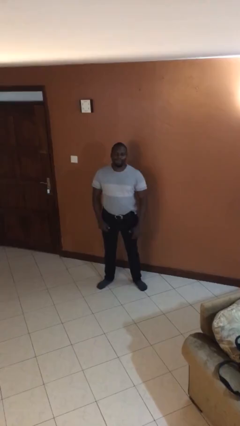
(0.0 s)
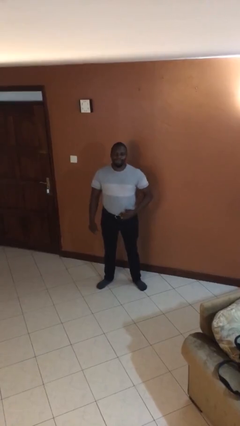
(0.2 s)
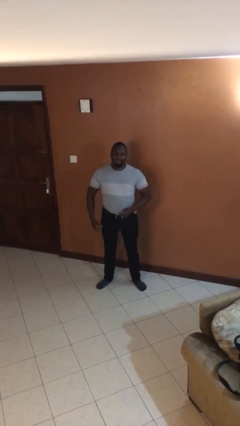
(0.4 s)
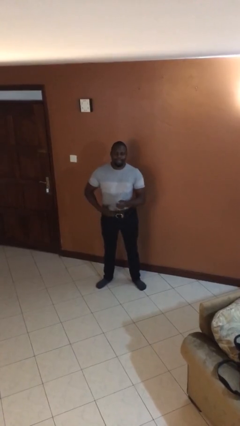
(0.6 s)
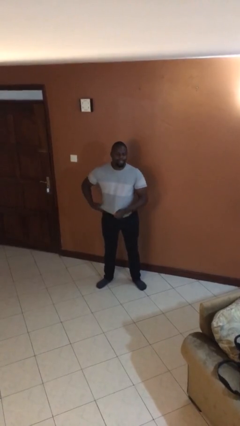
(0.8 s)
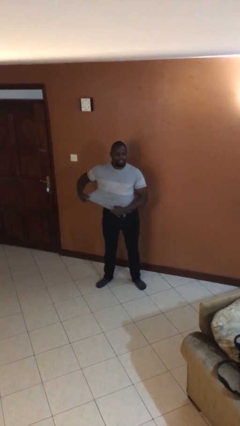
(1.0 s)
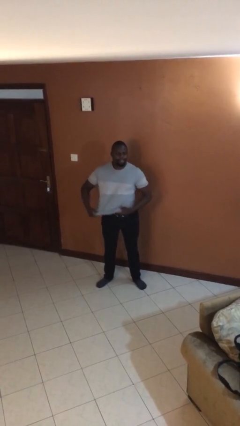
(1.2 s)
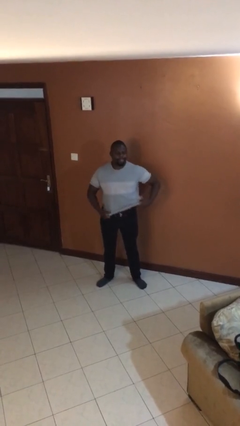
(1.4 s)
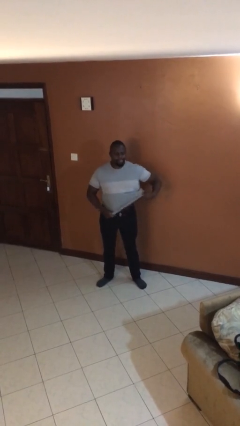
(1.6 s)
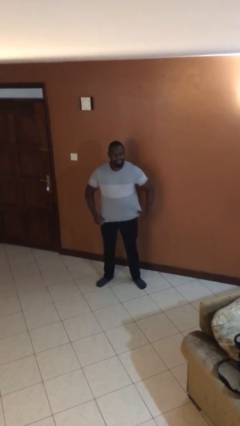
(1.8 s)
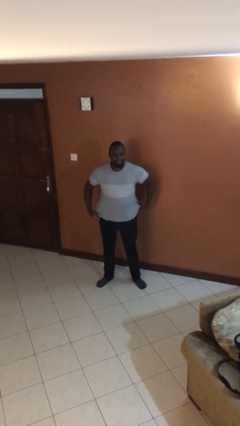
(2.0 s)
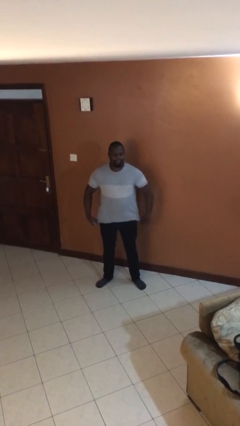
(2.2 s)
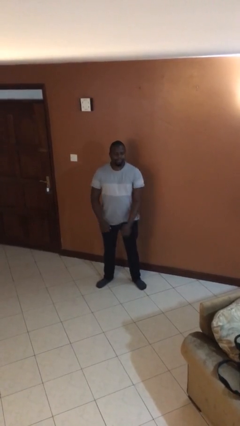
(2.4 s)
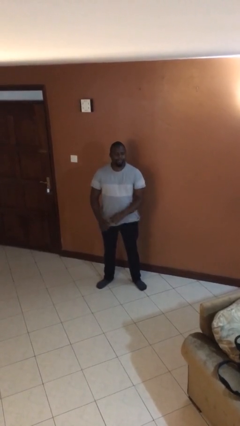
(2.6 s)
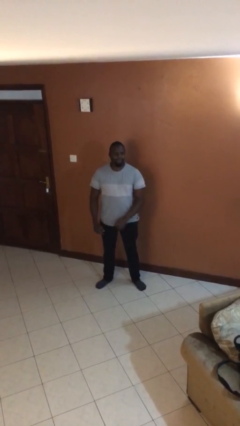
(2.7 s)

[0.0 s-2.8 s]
person untucks shirt

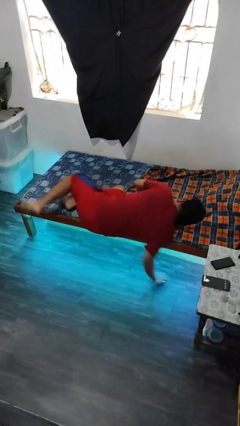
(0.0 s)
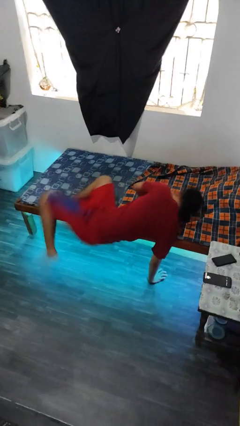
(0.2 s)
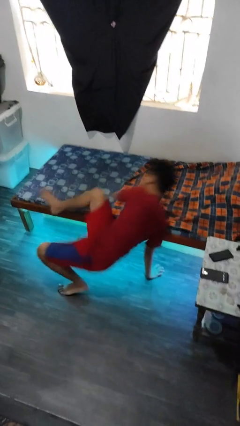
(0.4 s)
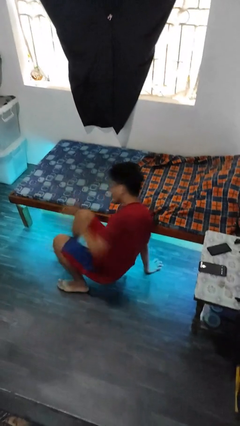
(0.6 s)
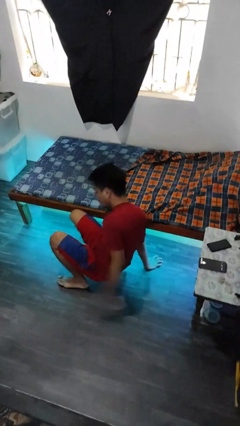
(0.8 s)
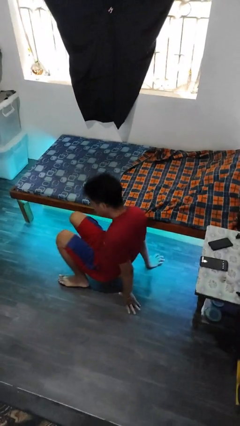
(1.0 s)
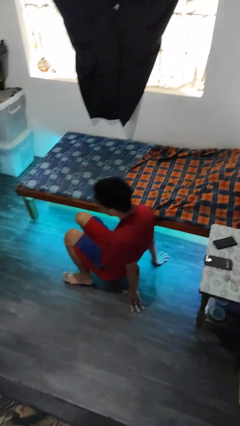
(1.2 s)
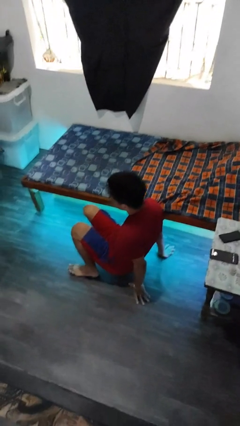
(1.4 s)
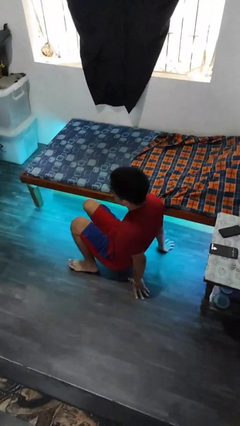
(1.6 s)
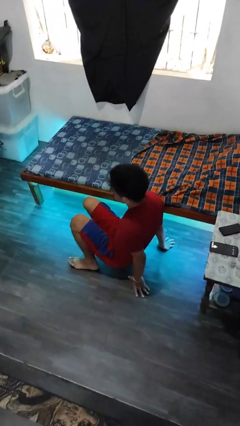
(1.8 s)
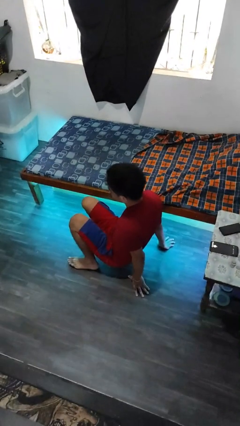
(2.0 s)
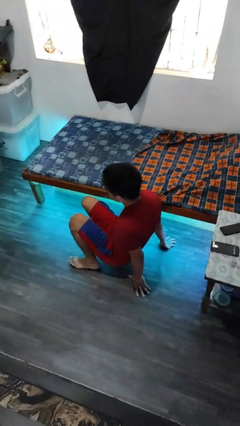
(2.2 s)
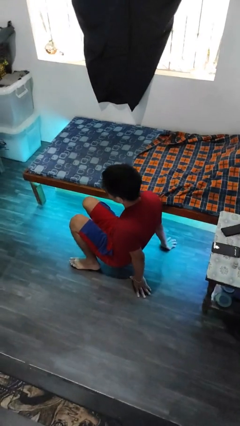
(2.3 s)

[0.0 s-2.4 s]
person falls from bed

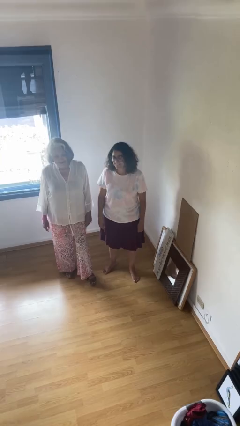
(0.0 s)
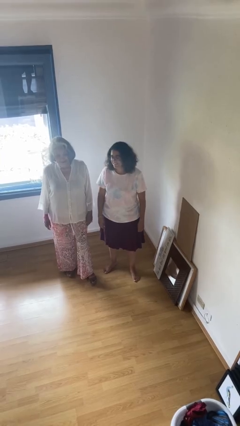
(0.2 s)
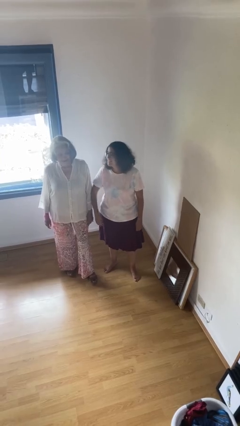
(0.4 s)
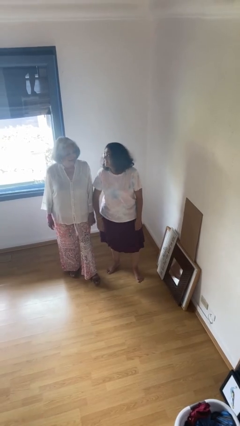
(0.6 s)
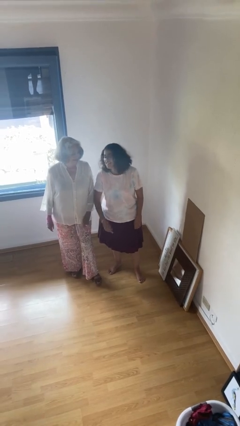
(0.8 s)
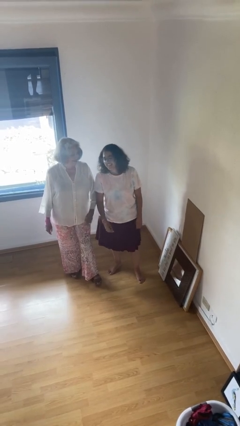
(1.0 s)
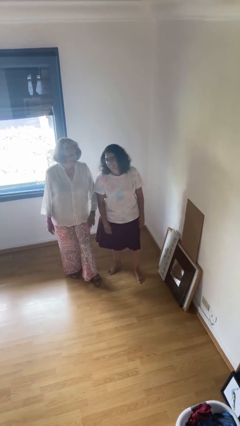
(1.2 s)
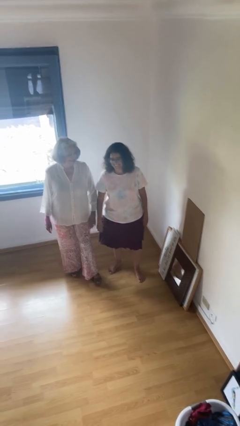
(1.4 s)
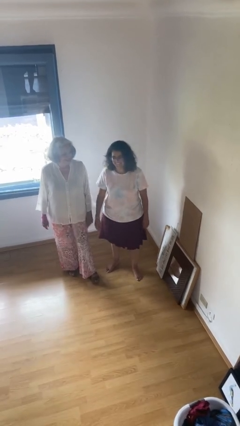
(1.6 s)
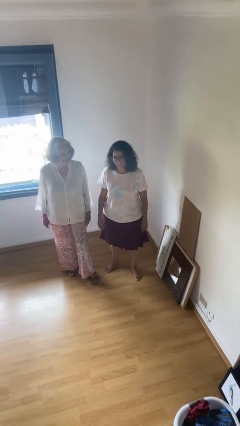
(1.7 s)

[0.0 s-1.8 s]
person nudges person with elbow

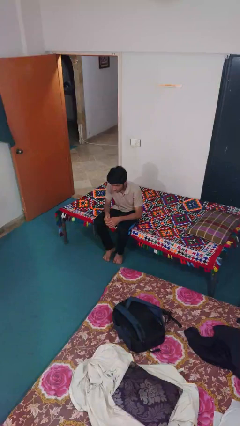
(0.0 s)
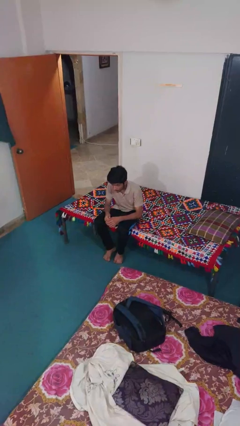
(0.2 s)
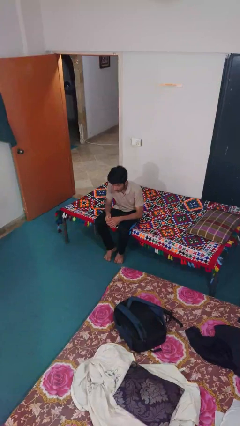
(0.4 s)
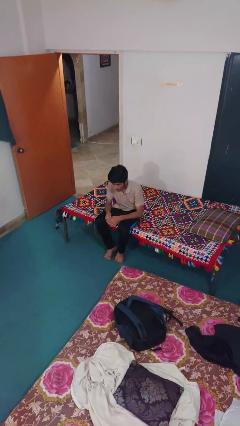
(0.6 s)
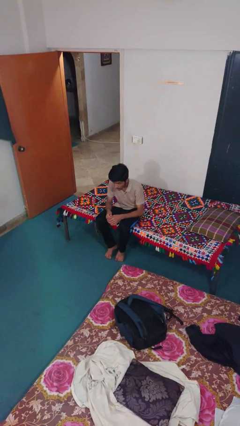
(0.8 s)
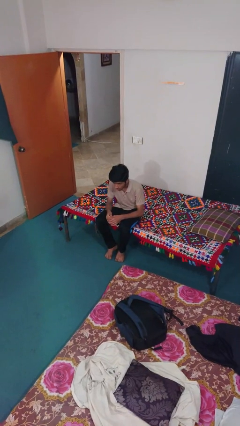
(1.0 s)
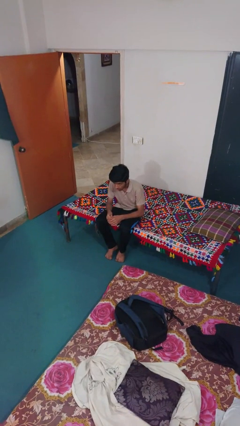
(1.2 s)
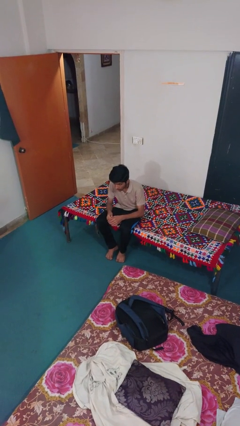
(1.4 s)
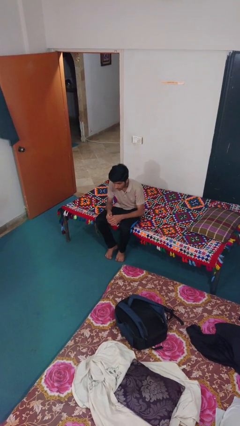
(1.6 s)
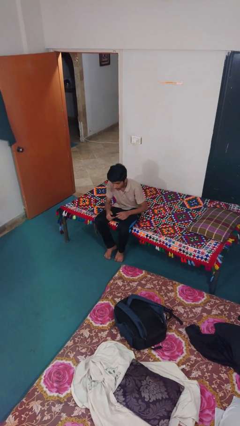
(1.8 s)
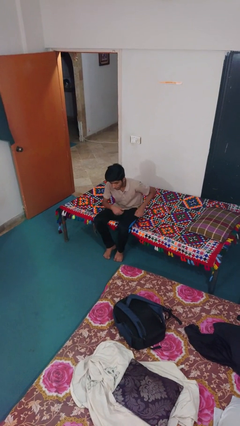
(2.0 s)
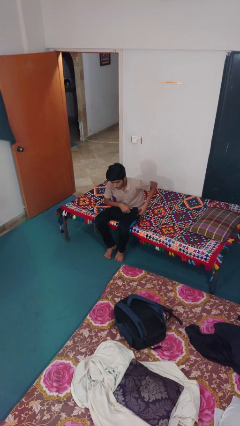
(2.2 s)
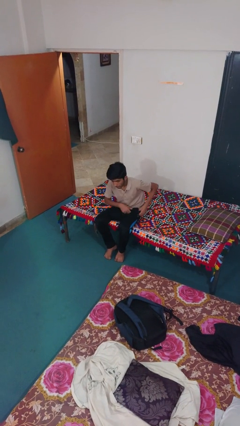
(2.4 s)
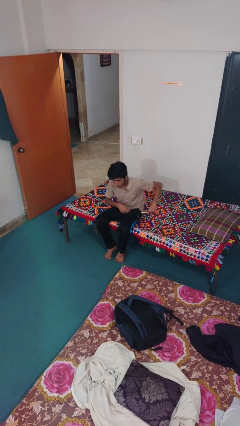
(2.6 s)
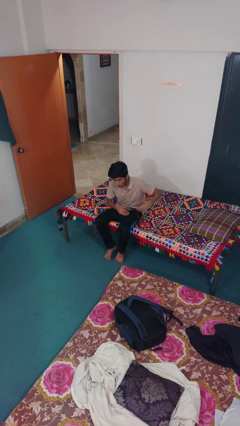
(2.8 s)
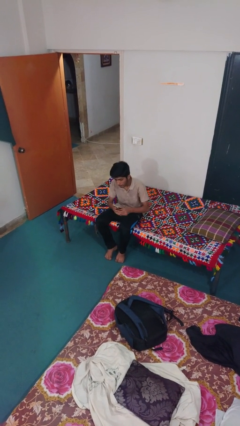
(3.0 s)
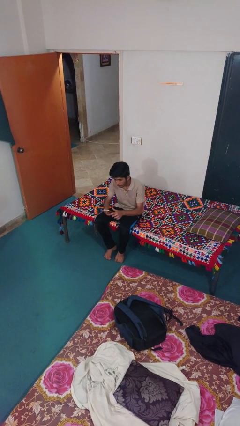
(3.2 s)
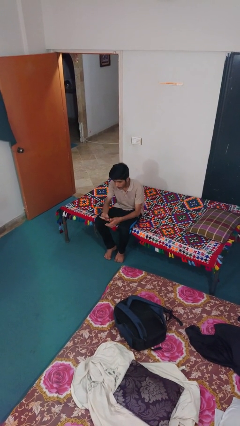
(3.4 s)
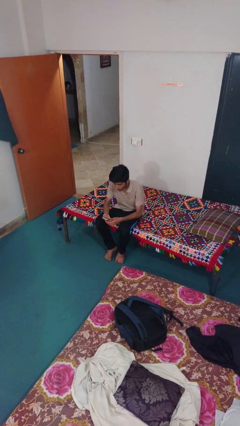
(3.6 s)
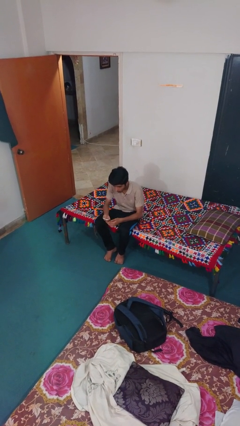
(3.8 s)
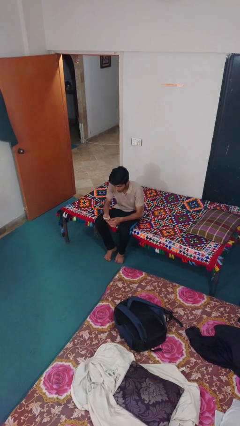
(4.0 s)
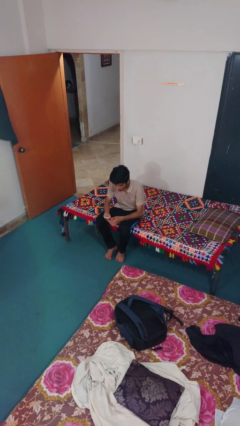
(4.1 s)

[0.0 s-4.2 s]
person takes phone from pocket

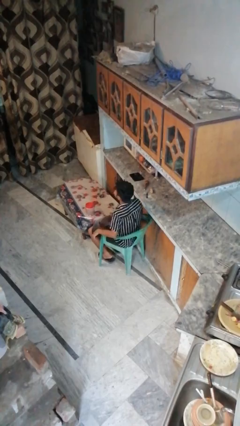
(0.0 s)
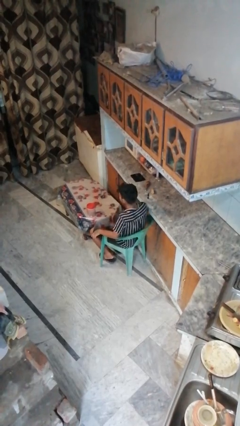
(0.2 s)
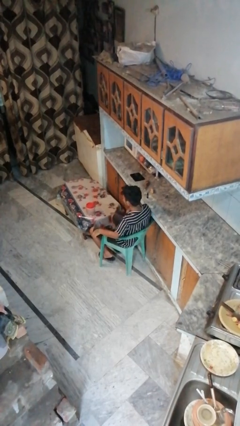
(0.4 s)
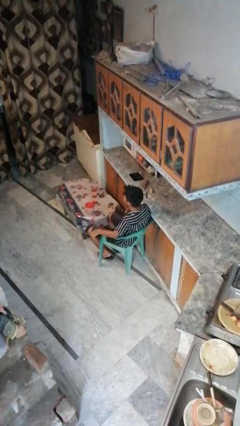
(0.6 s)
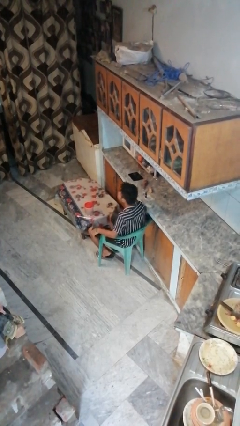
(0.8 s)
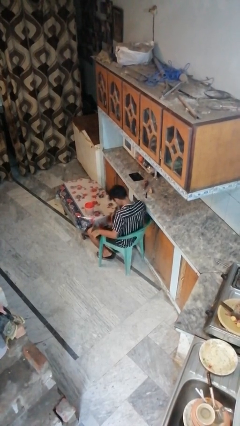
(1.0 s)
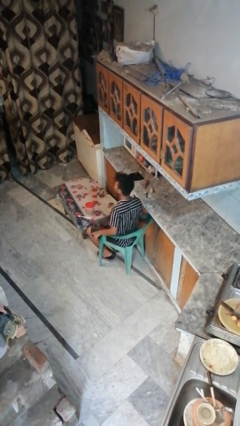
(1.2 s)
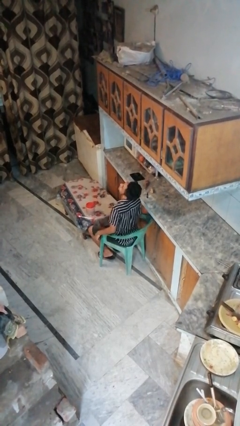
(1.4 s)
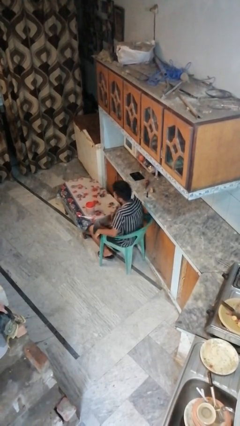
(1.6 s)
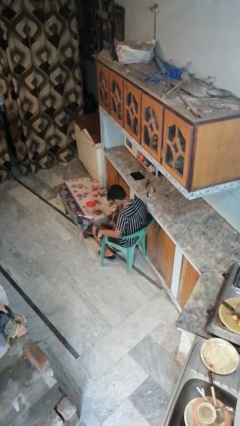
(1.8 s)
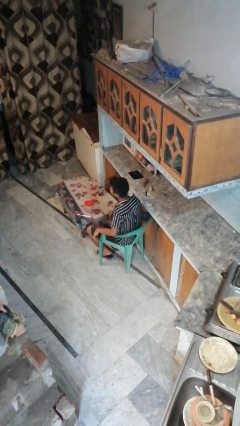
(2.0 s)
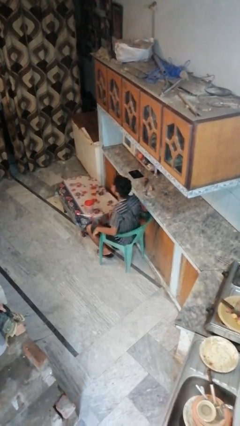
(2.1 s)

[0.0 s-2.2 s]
person nods head

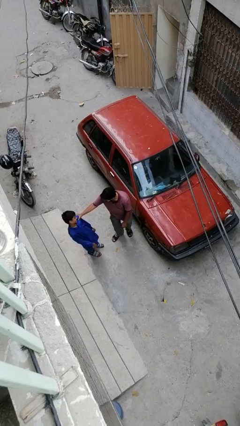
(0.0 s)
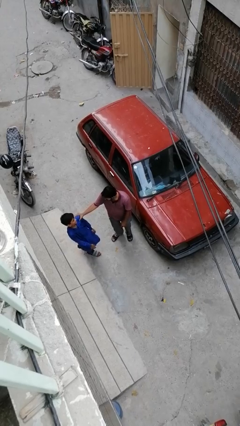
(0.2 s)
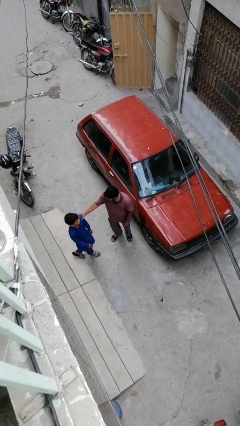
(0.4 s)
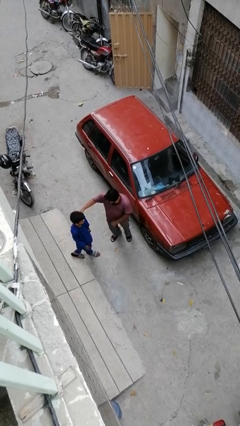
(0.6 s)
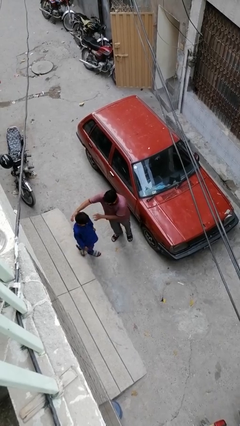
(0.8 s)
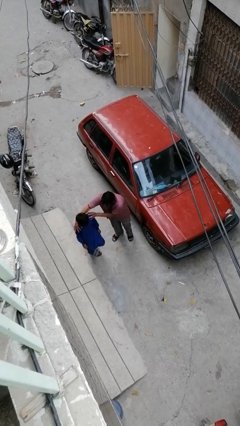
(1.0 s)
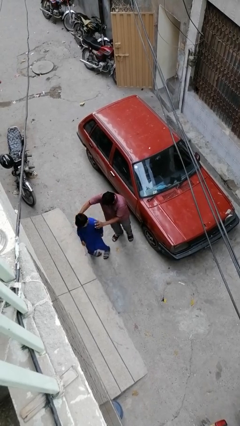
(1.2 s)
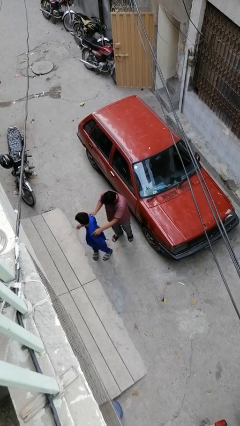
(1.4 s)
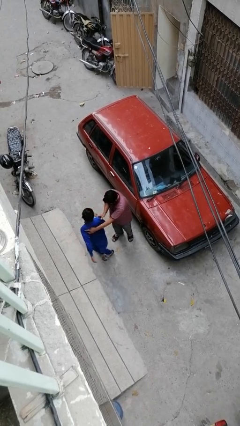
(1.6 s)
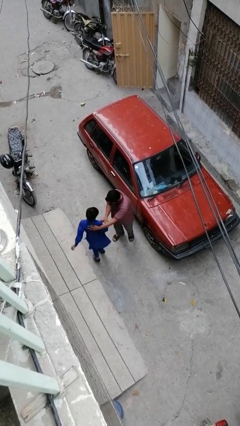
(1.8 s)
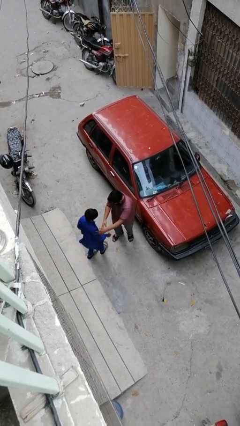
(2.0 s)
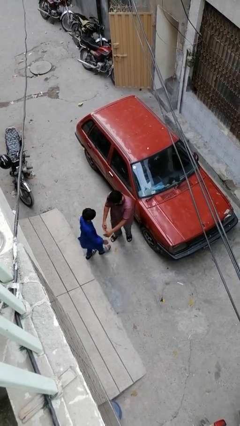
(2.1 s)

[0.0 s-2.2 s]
person spins person around

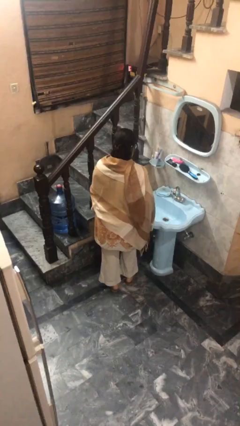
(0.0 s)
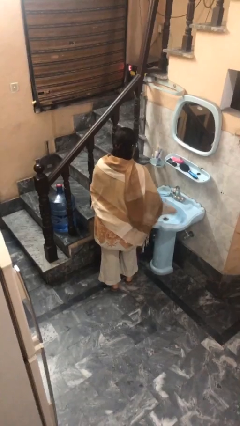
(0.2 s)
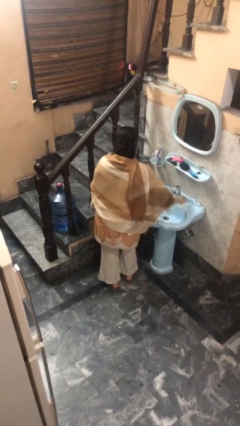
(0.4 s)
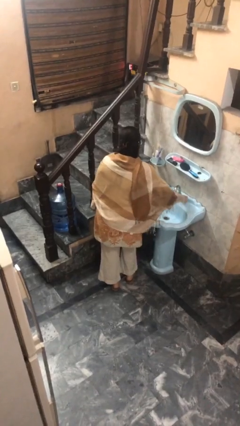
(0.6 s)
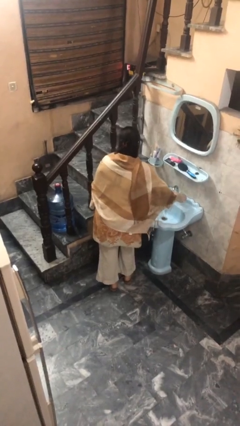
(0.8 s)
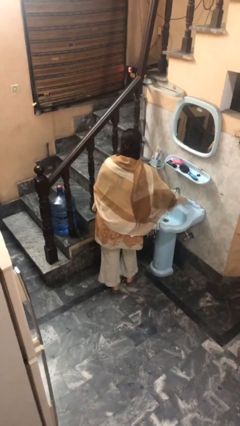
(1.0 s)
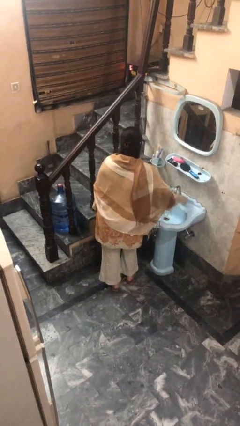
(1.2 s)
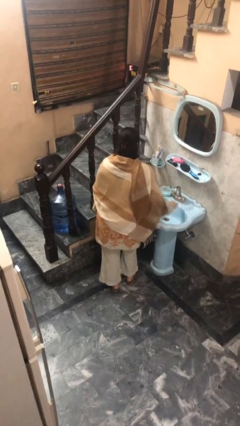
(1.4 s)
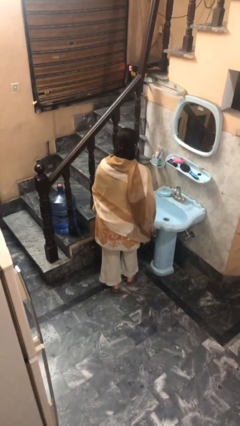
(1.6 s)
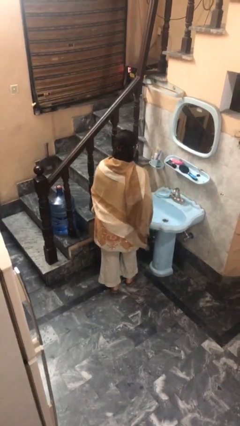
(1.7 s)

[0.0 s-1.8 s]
person turns off faucet
